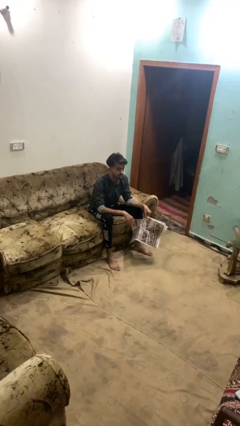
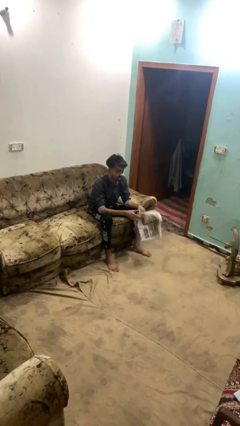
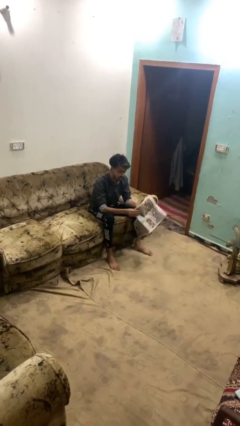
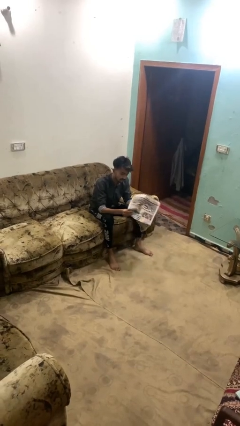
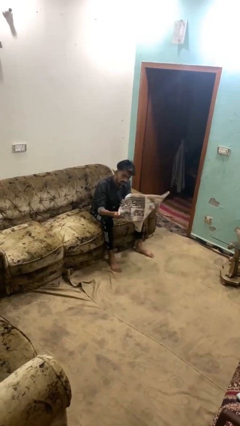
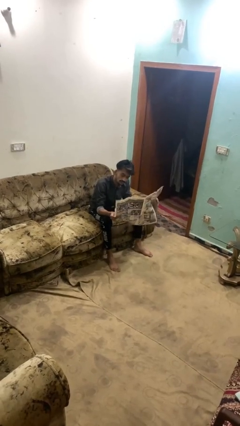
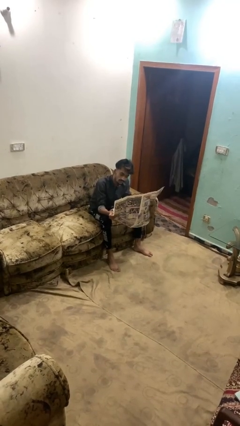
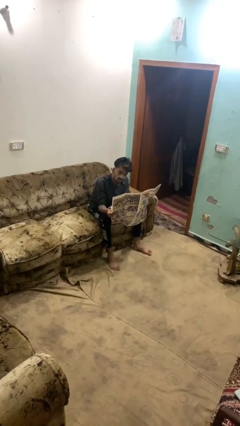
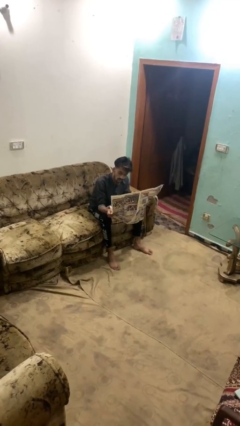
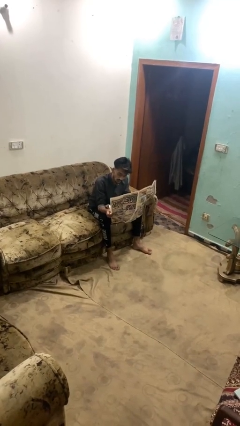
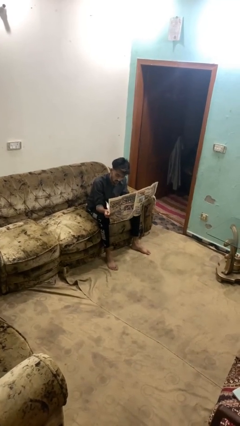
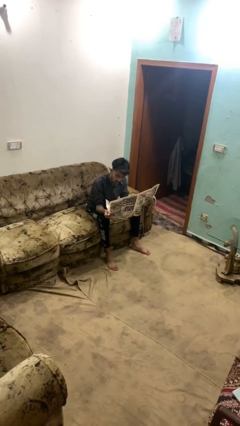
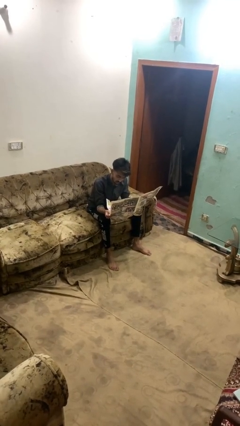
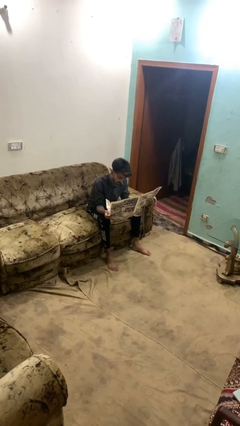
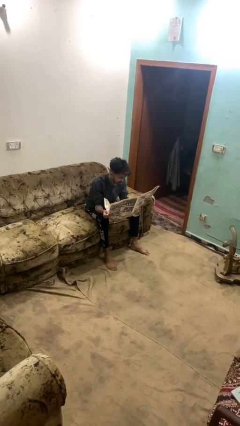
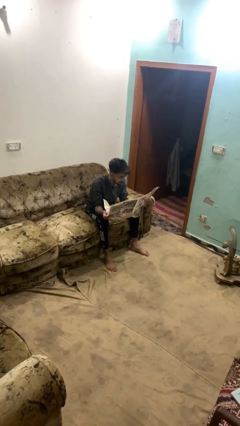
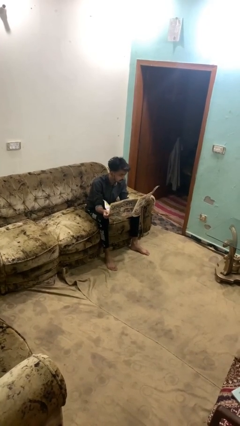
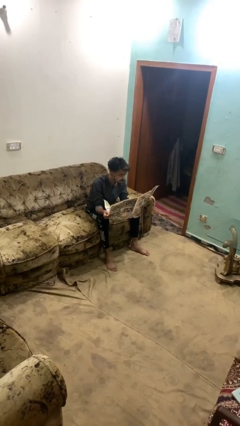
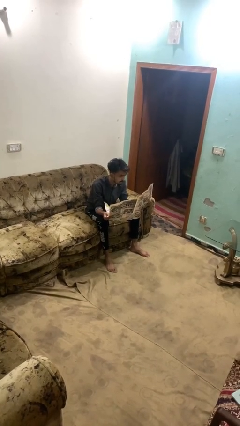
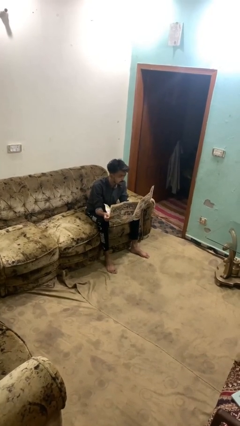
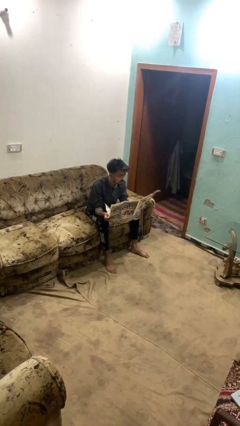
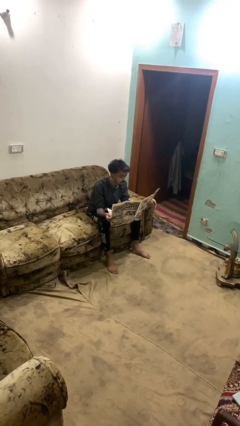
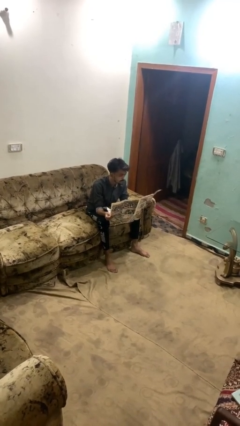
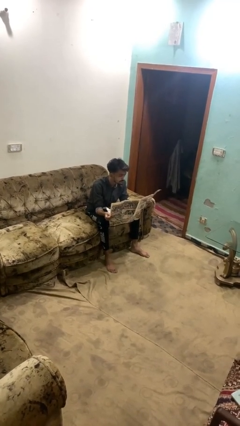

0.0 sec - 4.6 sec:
person reads newspaper

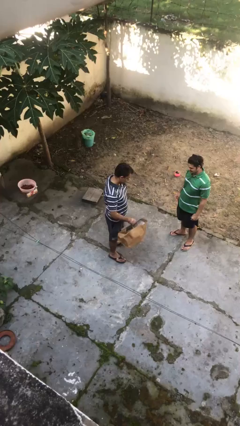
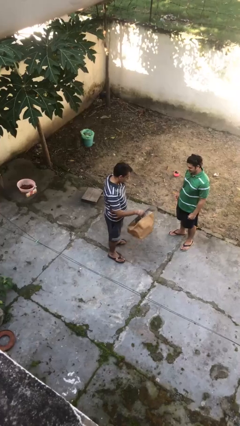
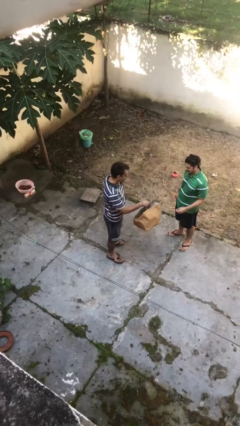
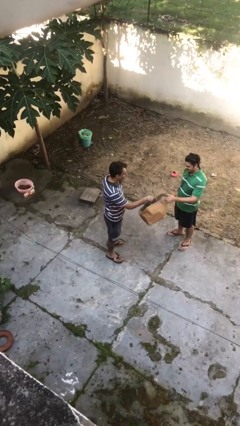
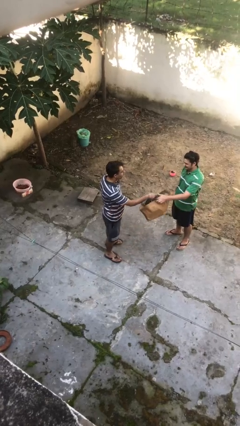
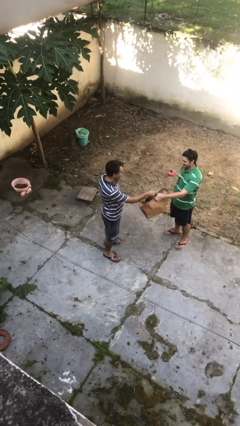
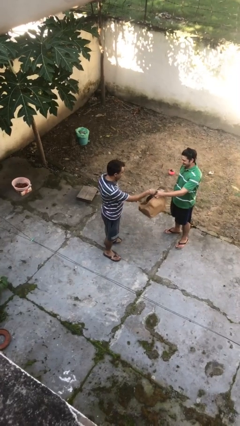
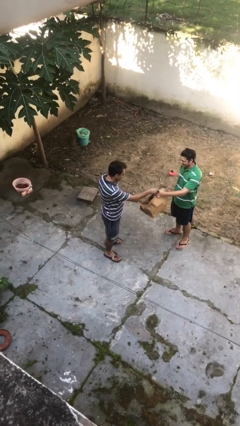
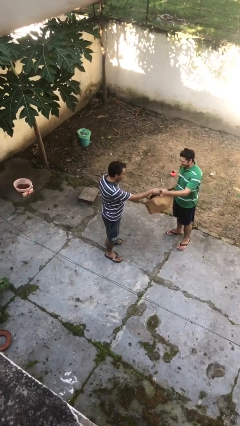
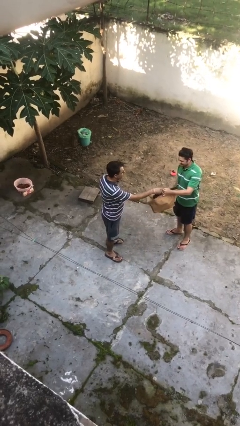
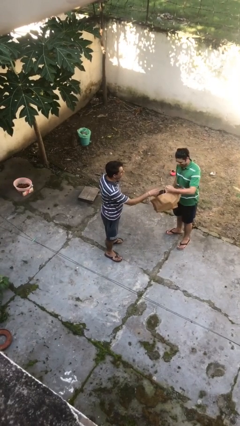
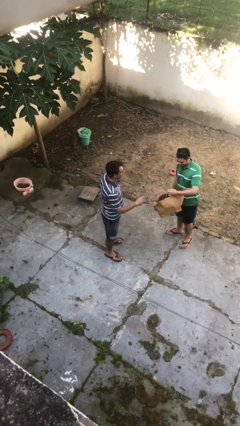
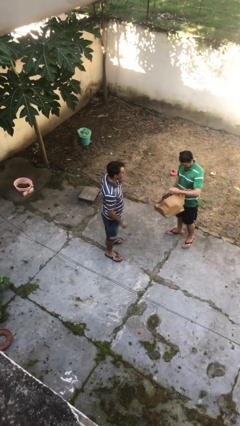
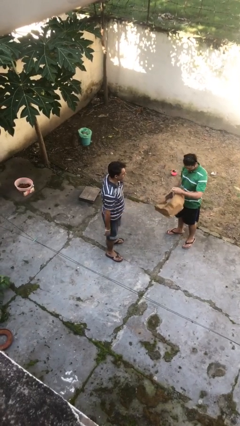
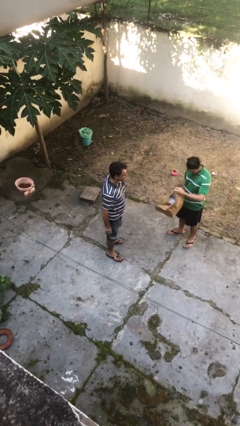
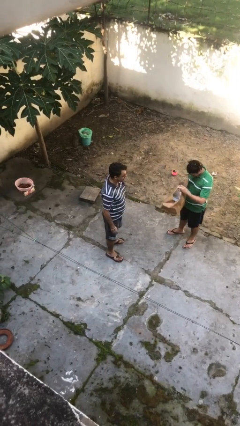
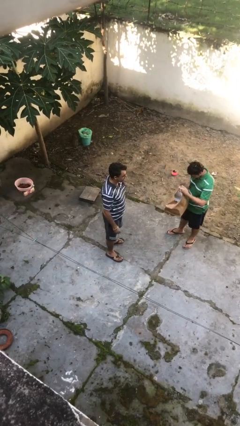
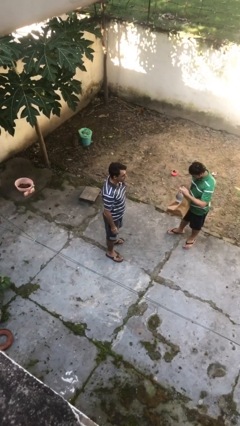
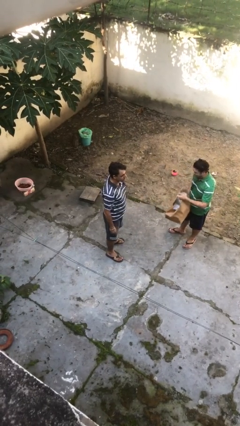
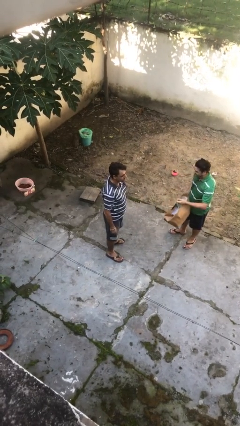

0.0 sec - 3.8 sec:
person transfers object to person

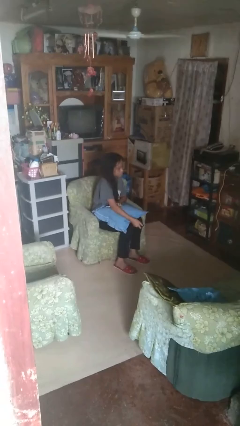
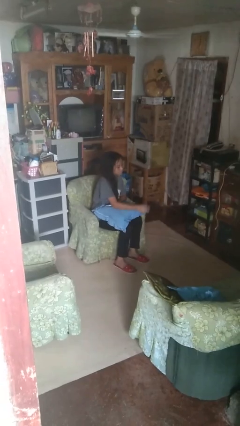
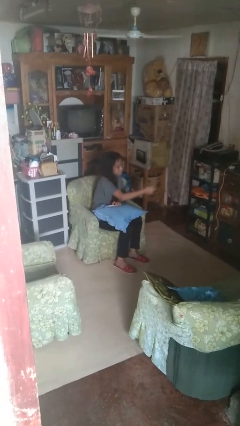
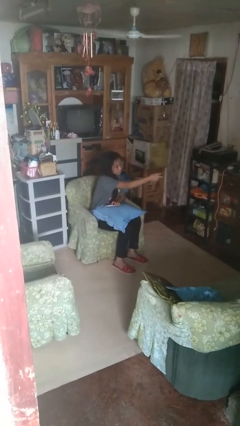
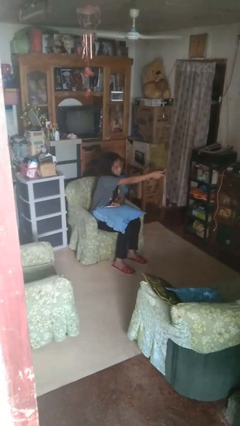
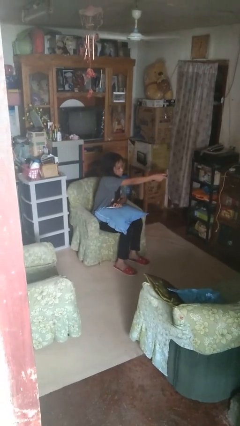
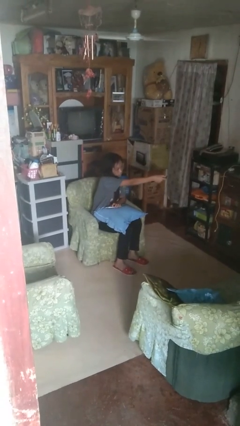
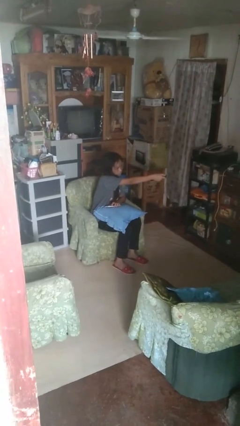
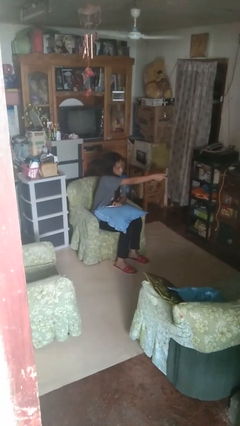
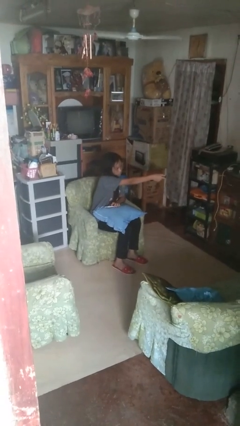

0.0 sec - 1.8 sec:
person uses television remote

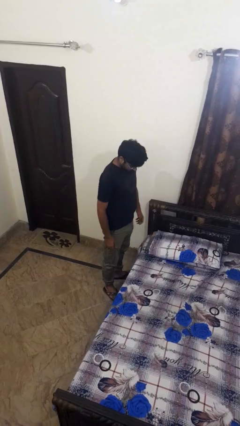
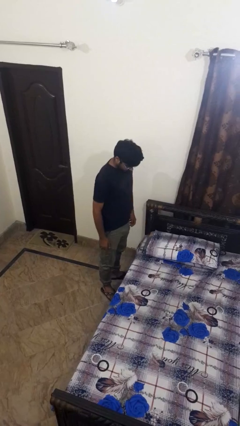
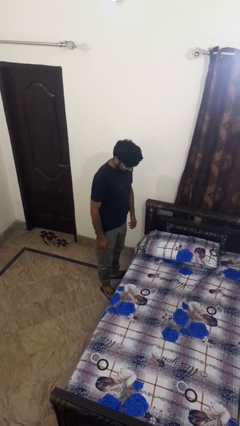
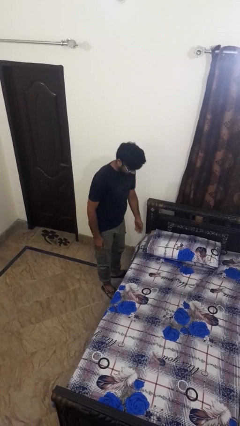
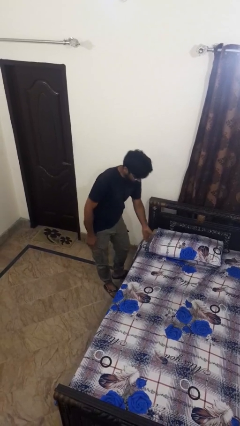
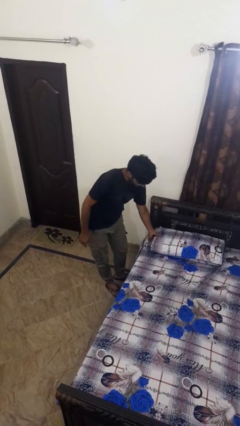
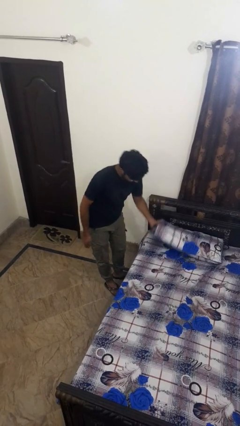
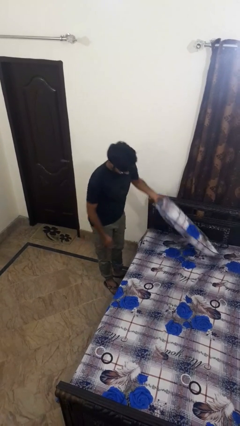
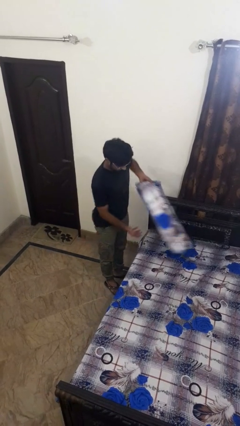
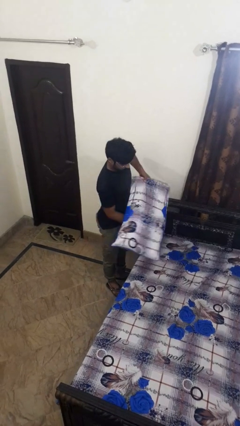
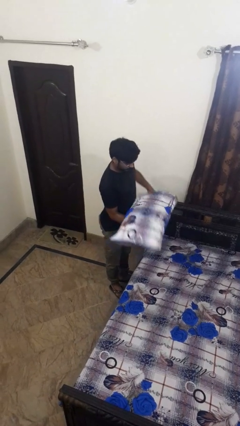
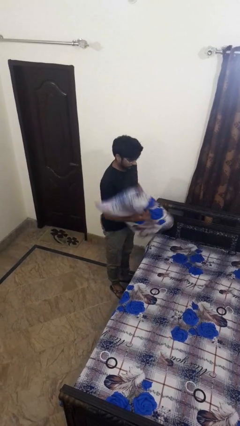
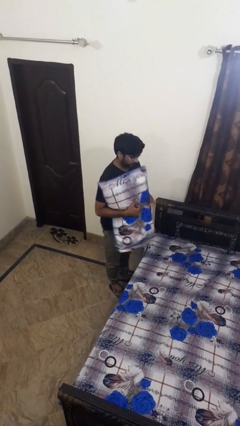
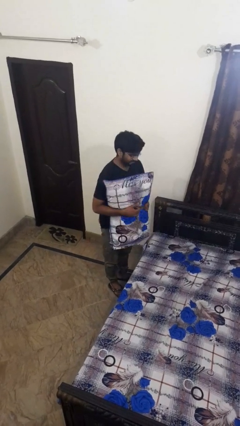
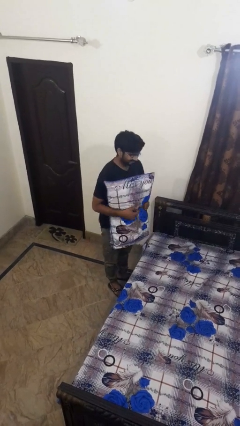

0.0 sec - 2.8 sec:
person picks up object from bed

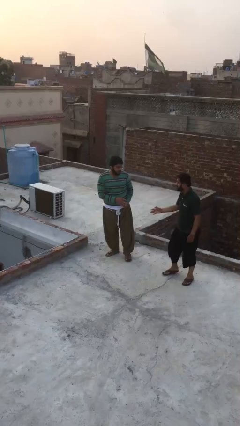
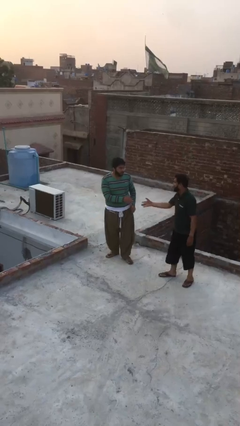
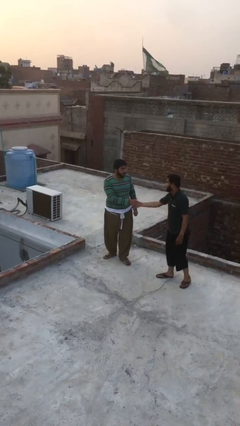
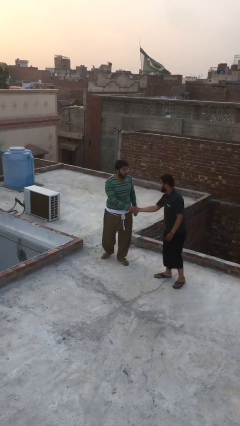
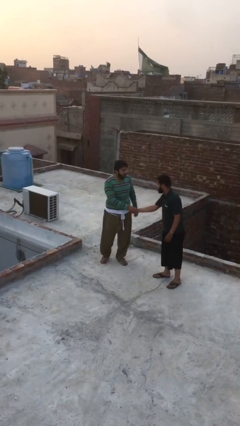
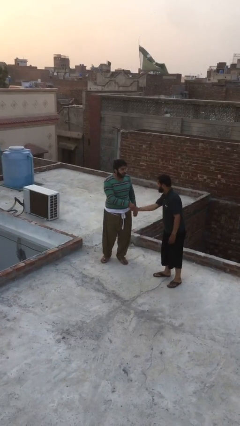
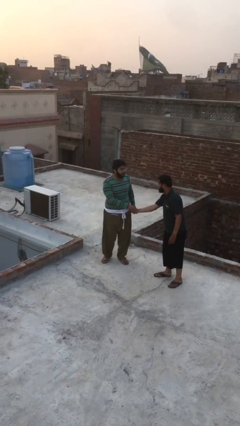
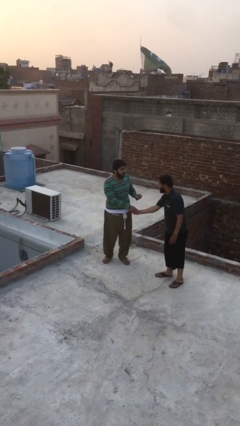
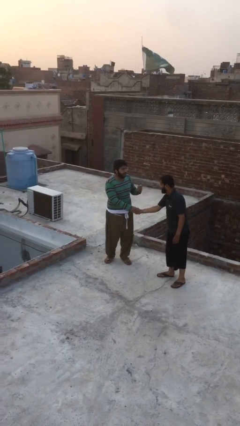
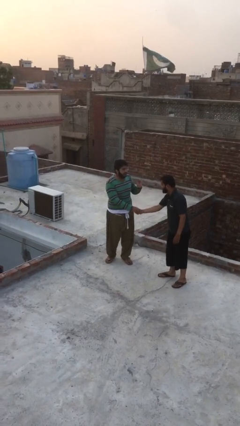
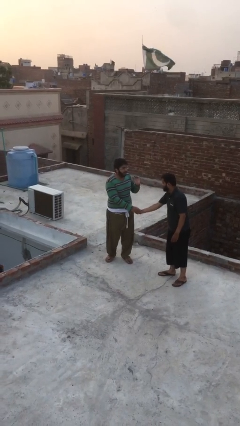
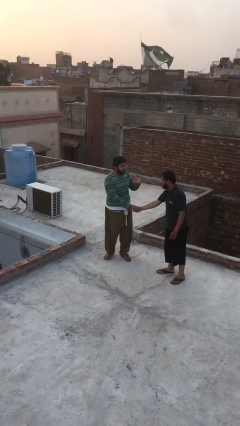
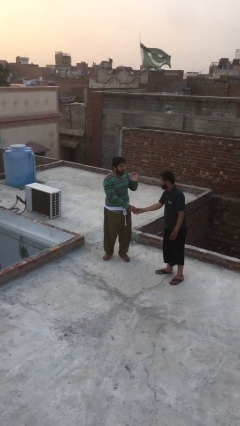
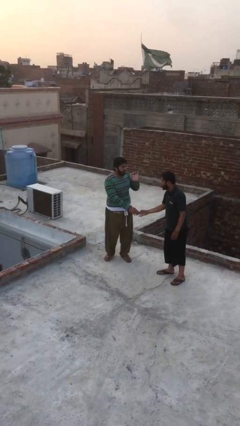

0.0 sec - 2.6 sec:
person shakes hand

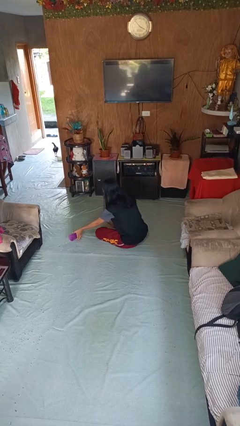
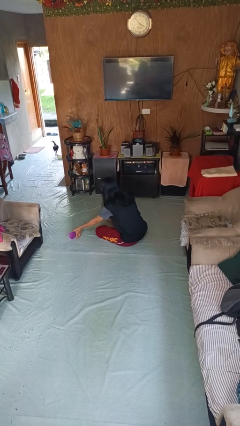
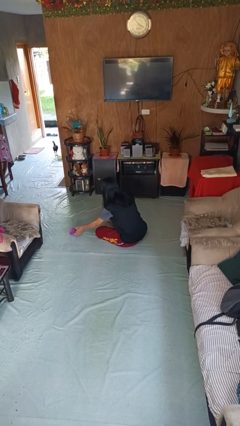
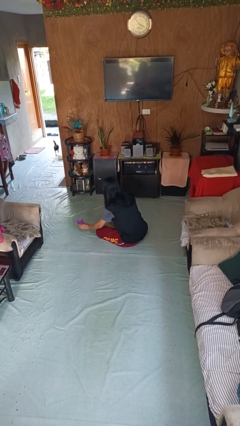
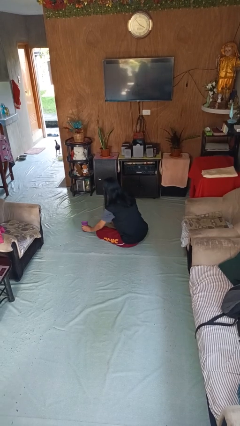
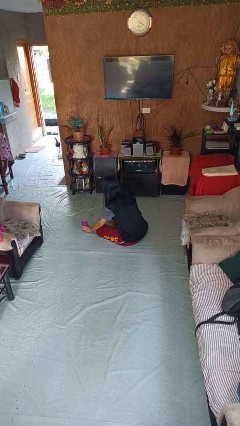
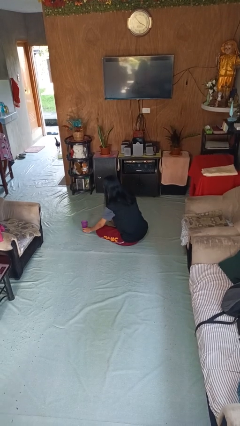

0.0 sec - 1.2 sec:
person sets upright glass

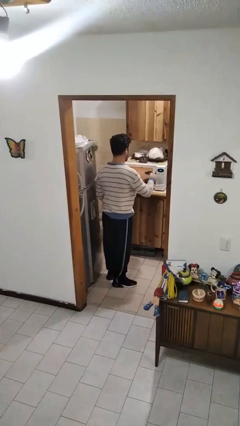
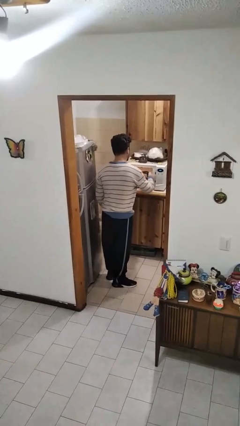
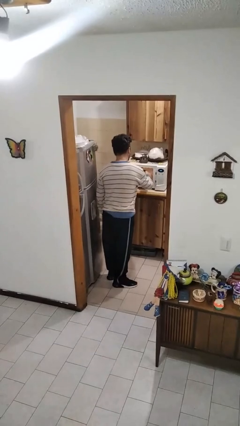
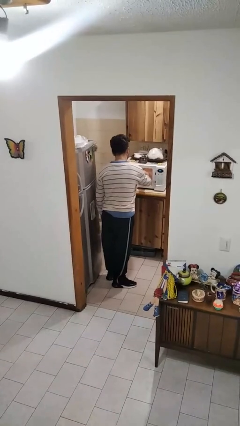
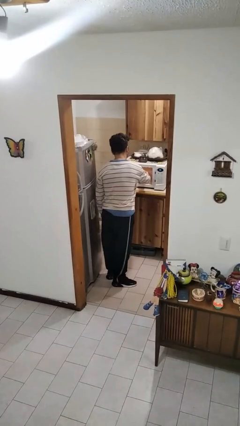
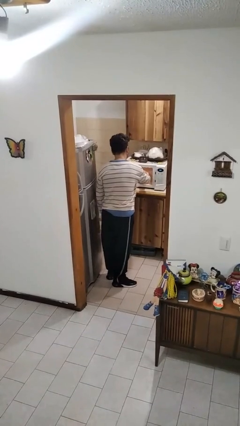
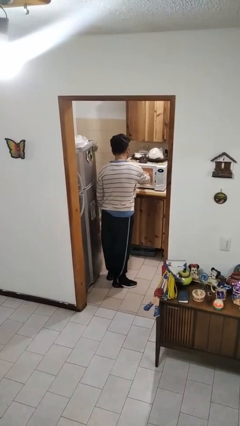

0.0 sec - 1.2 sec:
person puts object into microwave
